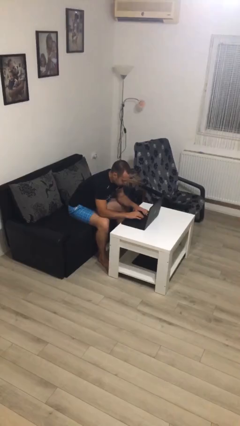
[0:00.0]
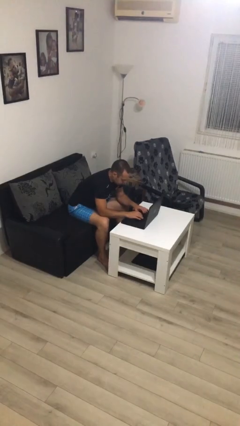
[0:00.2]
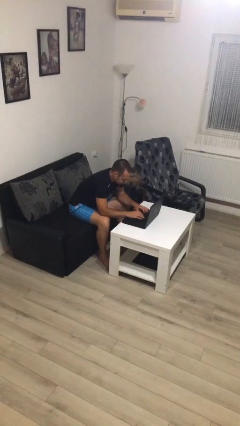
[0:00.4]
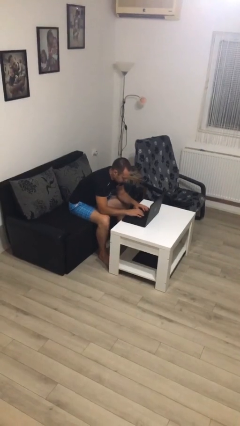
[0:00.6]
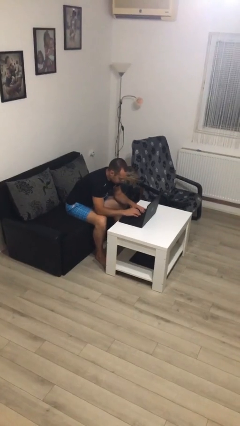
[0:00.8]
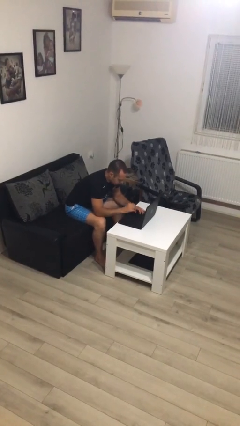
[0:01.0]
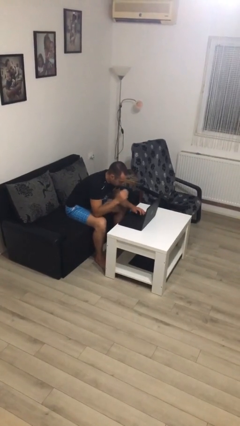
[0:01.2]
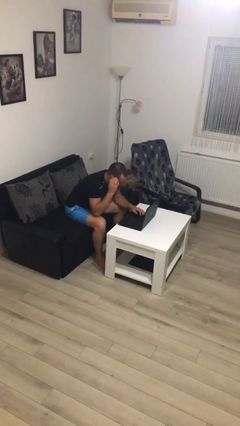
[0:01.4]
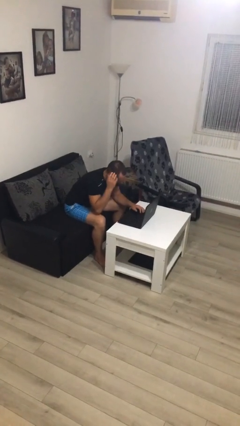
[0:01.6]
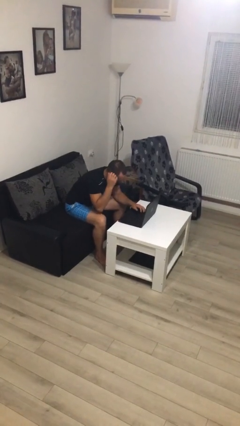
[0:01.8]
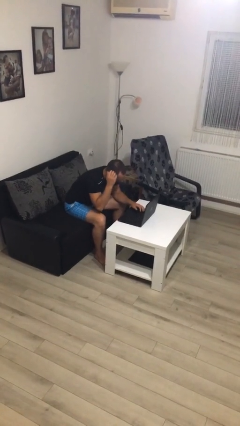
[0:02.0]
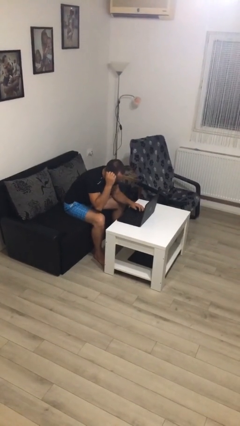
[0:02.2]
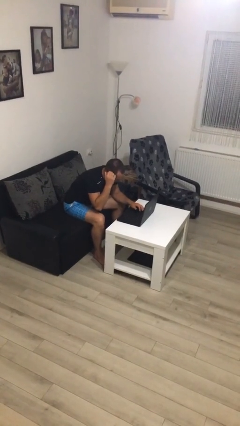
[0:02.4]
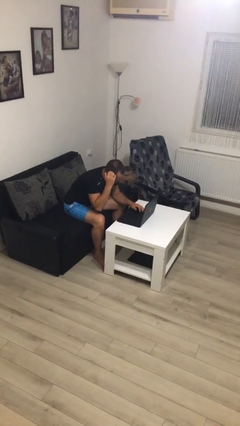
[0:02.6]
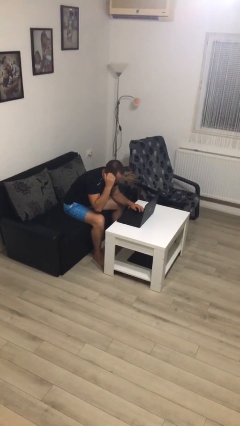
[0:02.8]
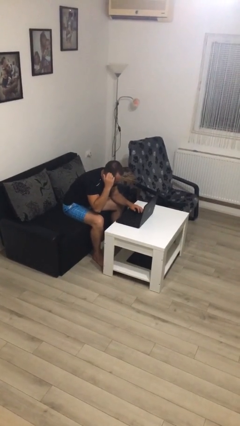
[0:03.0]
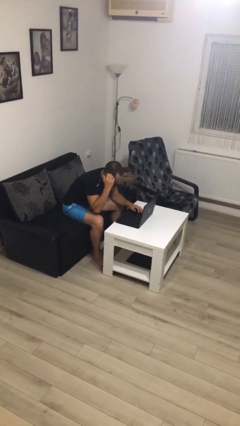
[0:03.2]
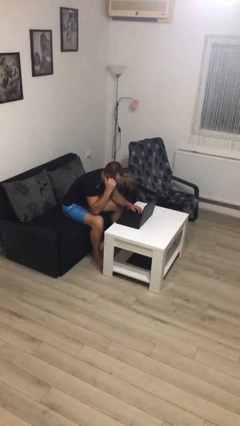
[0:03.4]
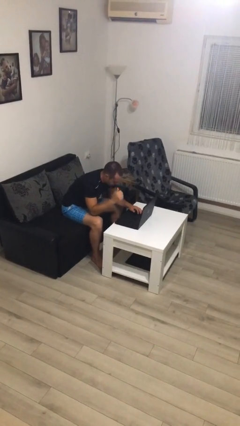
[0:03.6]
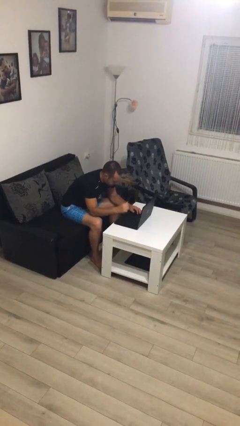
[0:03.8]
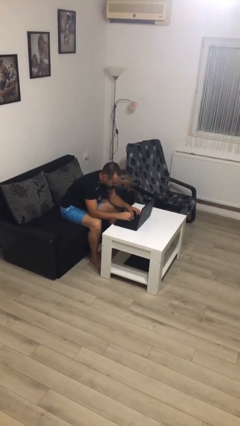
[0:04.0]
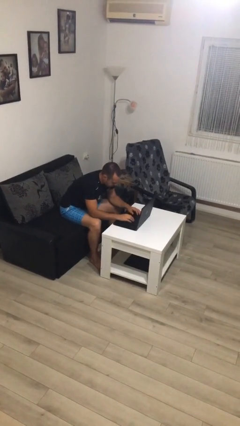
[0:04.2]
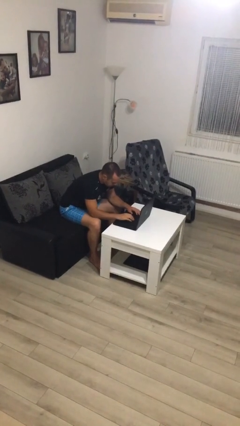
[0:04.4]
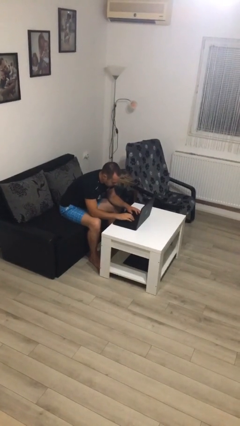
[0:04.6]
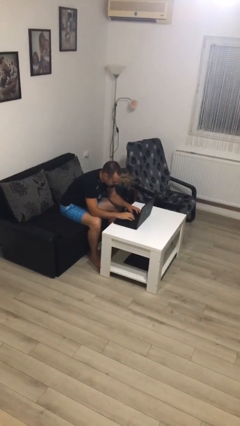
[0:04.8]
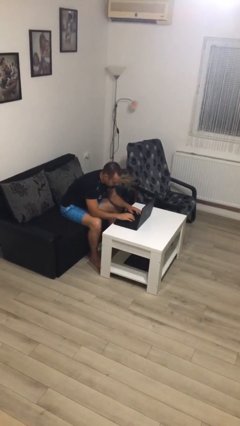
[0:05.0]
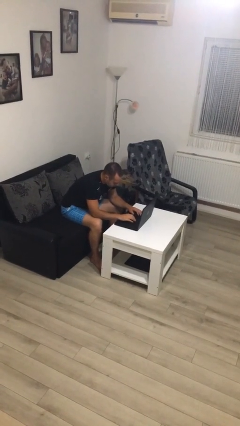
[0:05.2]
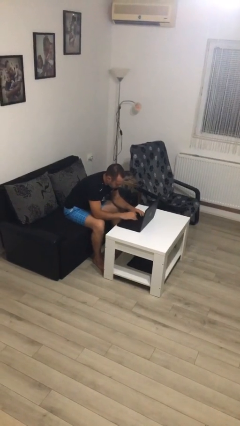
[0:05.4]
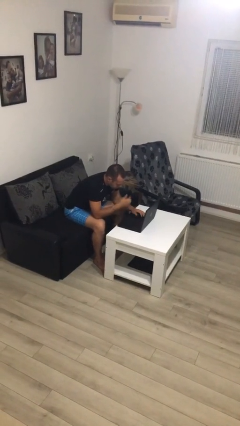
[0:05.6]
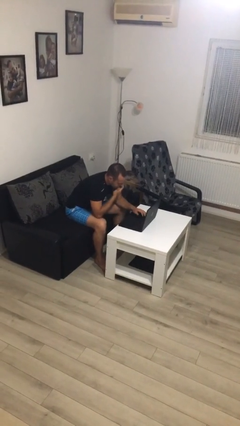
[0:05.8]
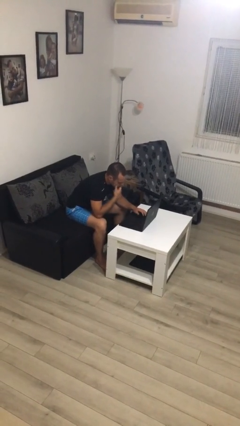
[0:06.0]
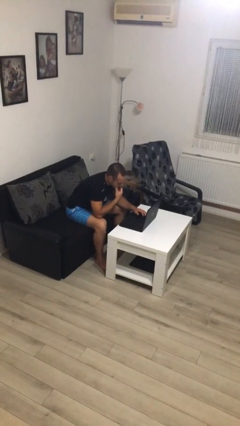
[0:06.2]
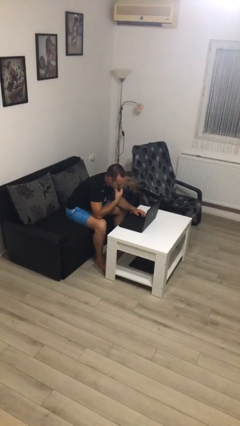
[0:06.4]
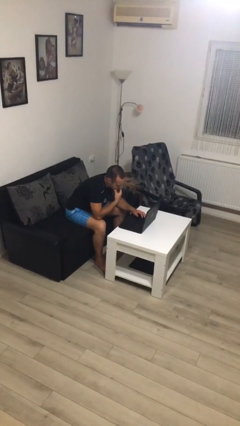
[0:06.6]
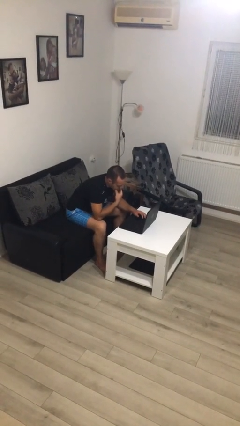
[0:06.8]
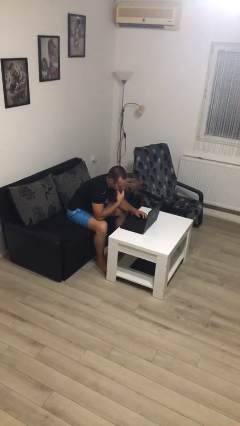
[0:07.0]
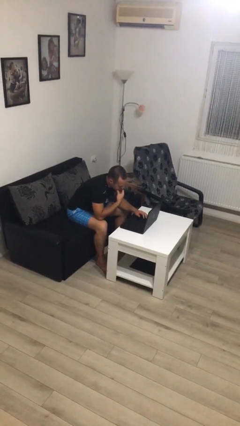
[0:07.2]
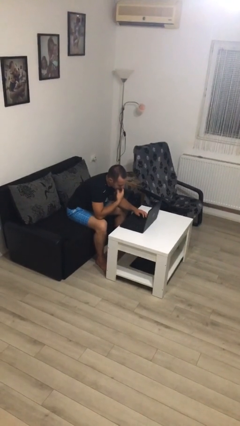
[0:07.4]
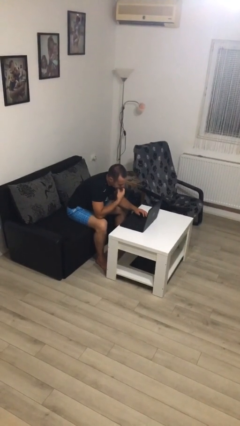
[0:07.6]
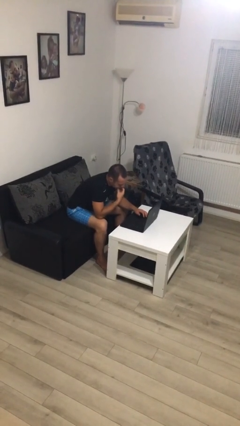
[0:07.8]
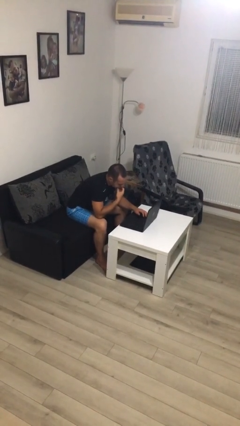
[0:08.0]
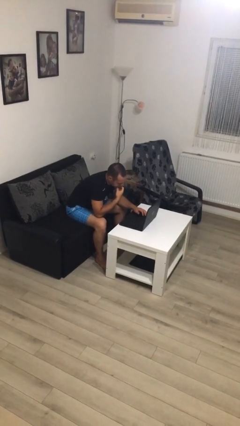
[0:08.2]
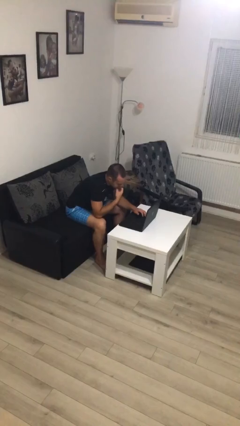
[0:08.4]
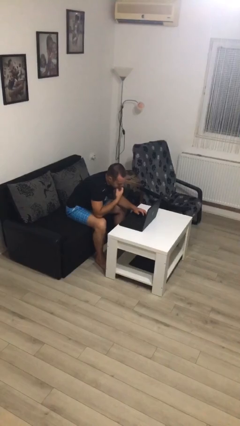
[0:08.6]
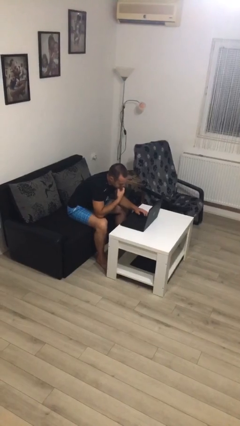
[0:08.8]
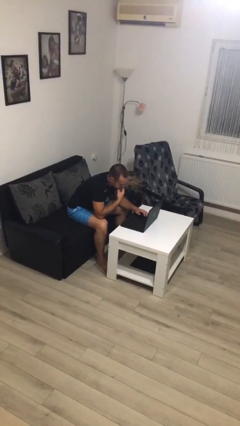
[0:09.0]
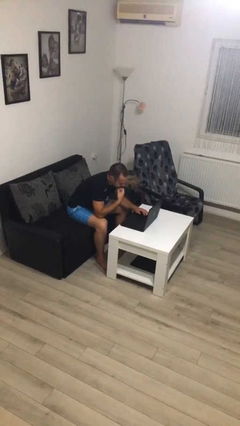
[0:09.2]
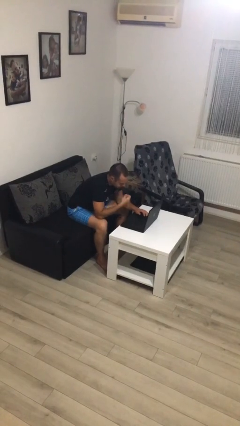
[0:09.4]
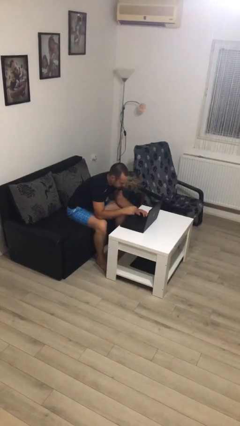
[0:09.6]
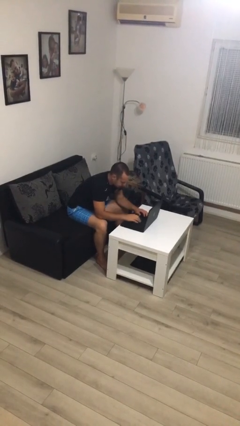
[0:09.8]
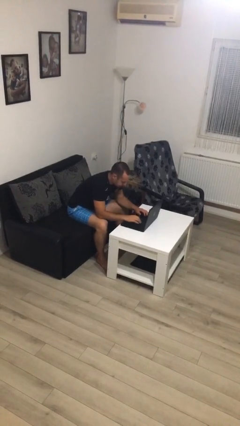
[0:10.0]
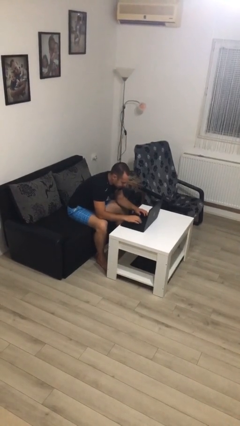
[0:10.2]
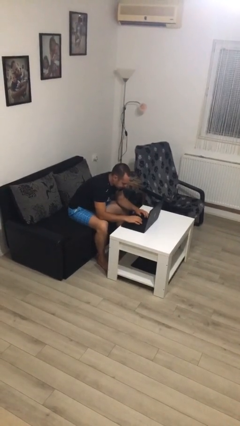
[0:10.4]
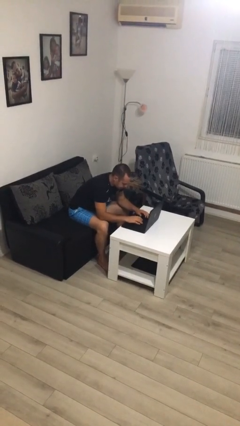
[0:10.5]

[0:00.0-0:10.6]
person interacts with laptop

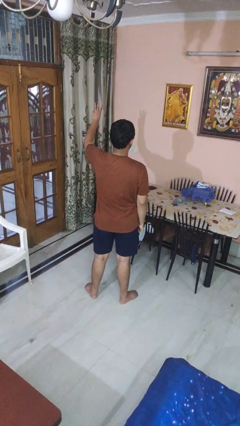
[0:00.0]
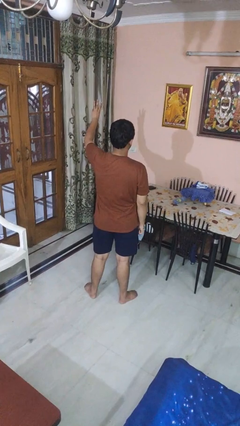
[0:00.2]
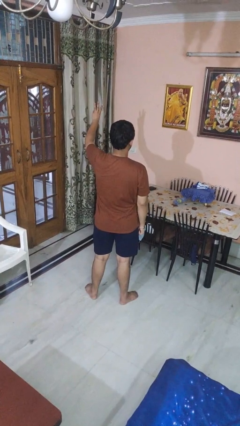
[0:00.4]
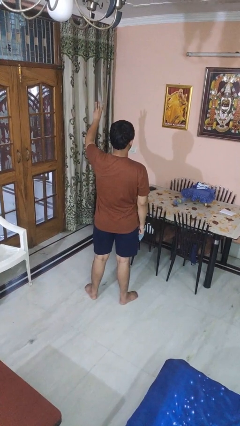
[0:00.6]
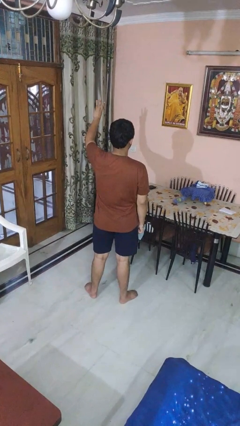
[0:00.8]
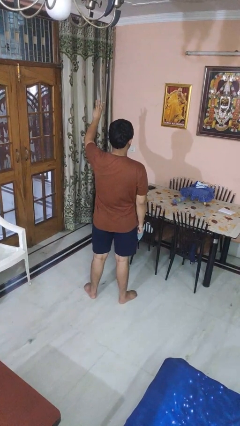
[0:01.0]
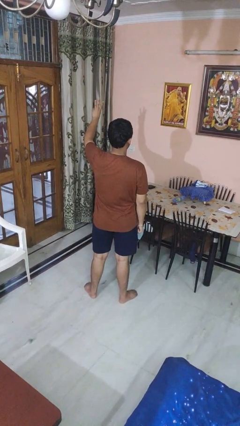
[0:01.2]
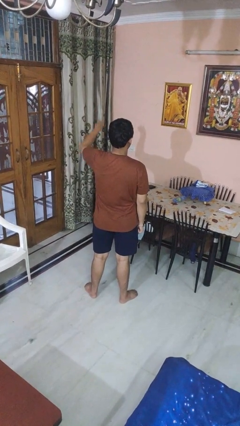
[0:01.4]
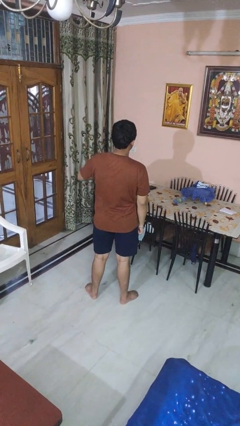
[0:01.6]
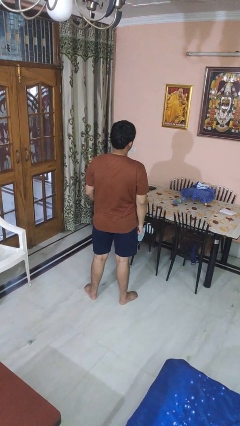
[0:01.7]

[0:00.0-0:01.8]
person gestures number three

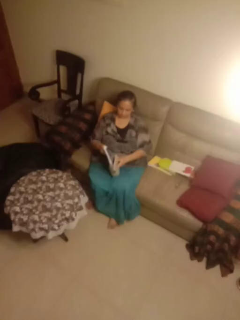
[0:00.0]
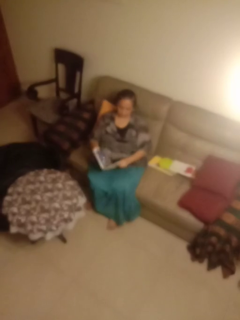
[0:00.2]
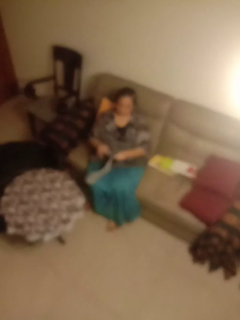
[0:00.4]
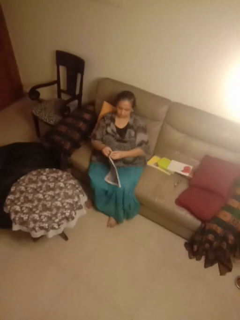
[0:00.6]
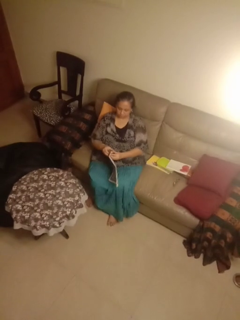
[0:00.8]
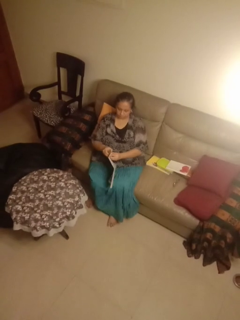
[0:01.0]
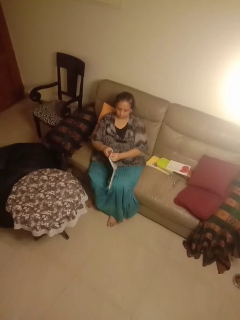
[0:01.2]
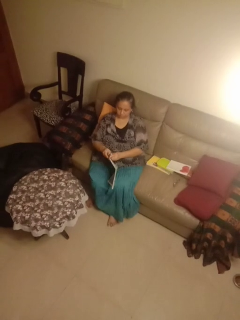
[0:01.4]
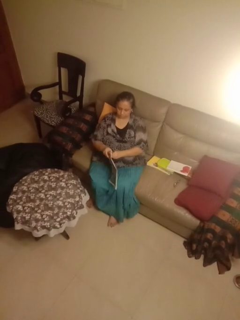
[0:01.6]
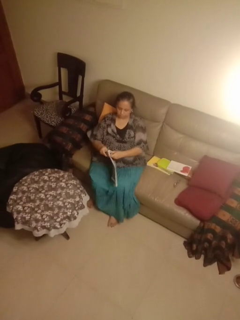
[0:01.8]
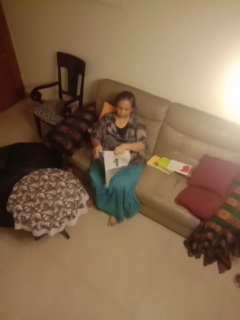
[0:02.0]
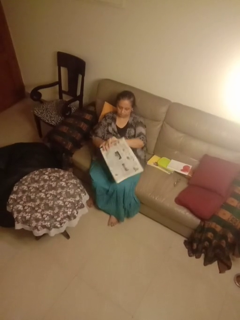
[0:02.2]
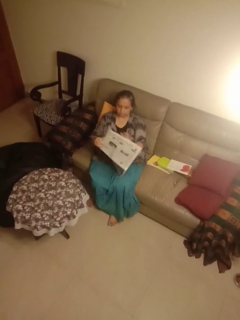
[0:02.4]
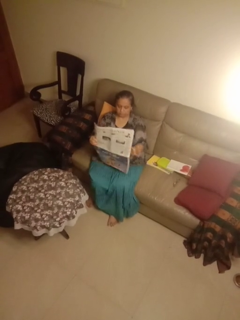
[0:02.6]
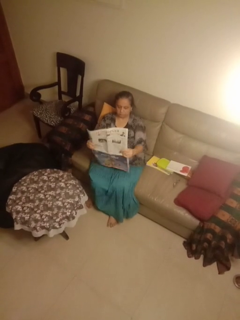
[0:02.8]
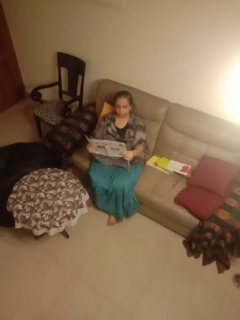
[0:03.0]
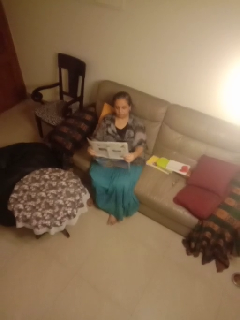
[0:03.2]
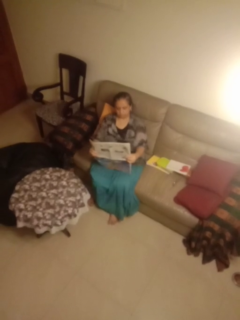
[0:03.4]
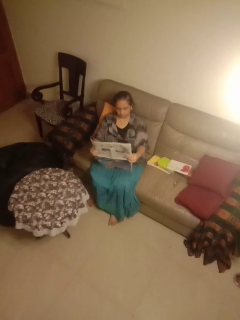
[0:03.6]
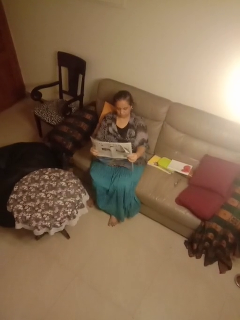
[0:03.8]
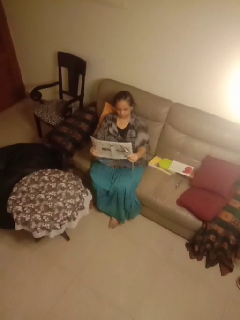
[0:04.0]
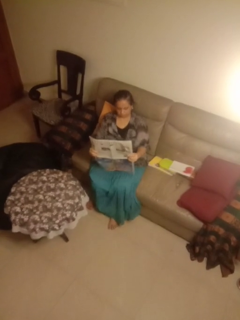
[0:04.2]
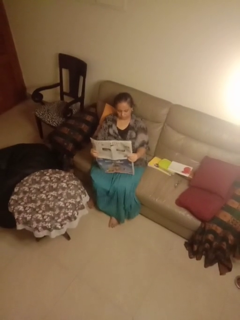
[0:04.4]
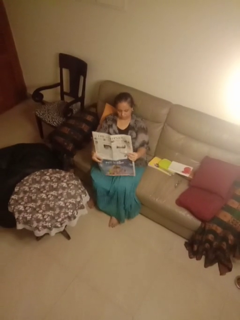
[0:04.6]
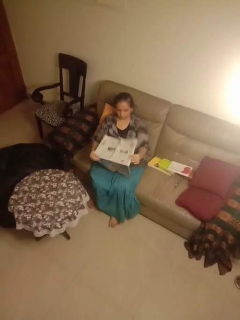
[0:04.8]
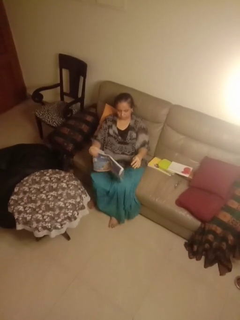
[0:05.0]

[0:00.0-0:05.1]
person reads newspaper

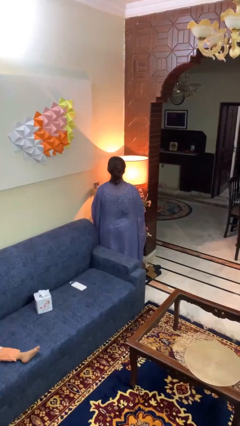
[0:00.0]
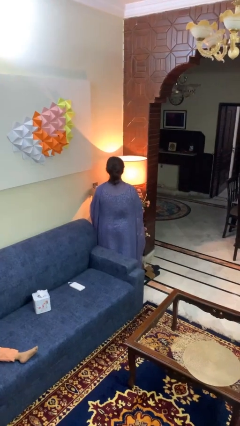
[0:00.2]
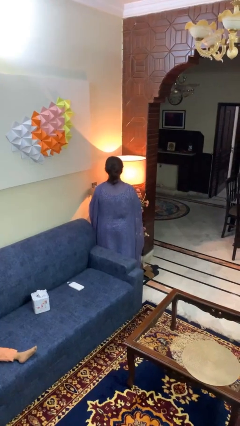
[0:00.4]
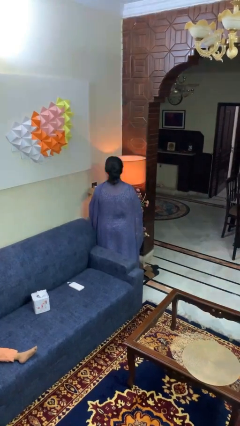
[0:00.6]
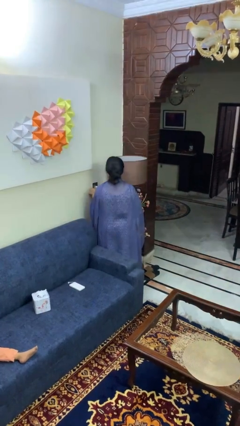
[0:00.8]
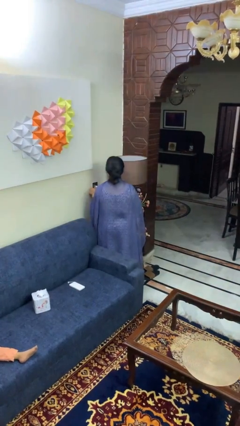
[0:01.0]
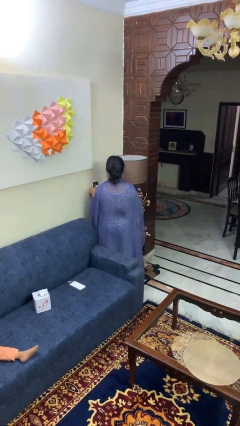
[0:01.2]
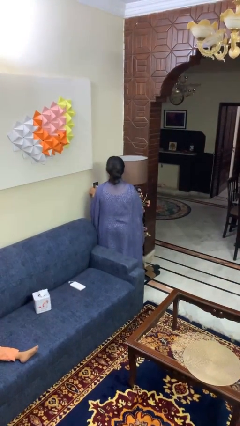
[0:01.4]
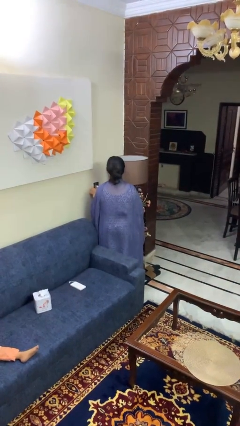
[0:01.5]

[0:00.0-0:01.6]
person turns off lamp
